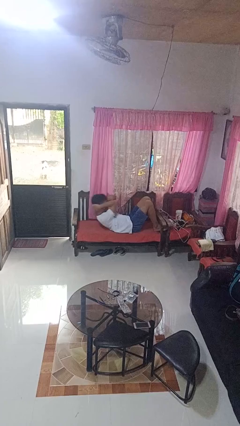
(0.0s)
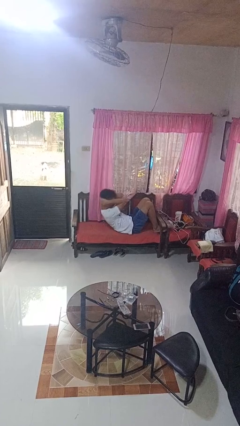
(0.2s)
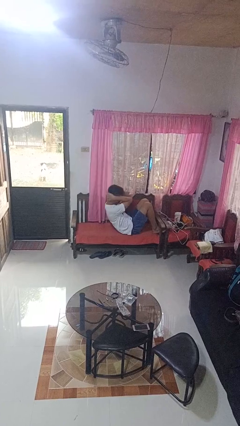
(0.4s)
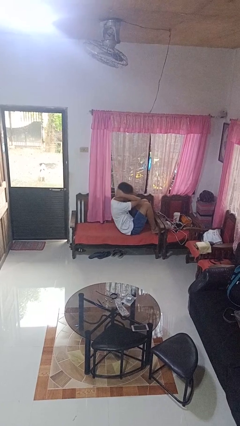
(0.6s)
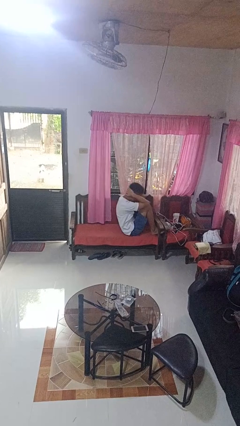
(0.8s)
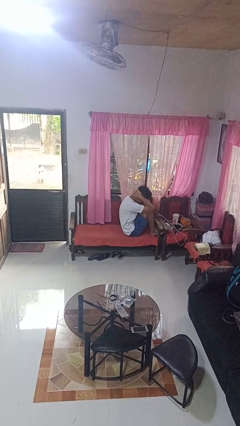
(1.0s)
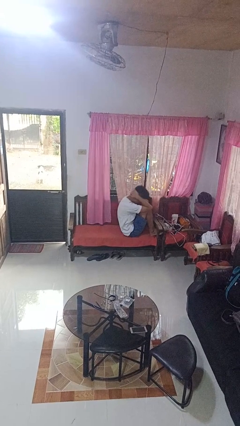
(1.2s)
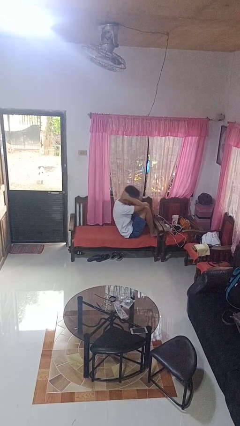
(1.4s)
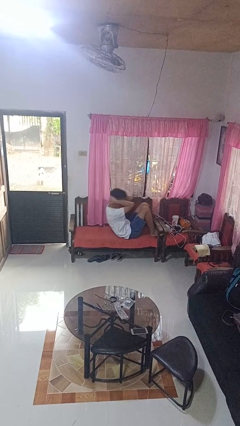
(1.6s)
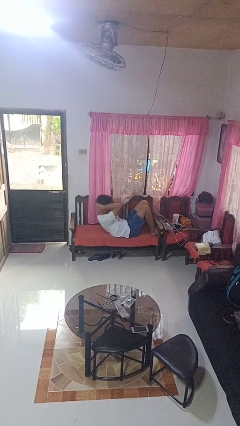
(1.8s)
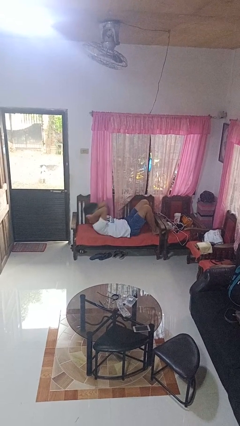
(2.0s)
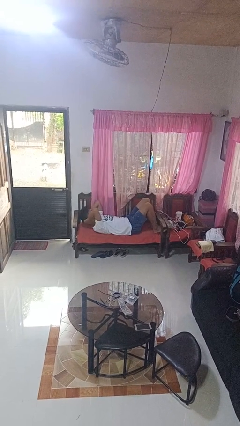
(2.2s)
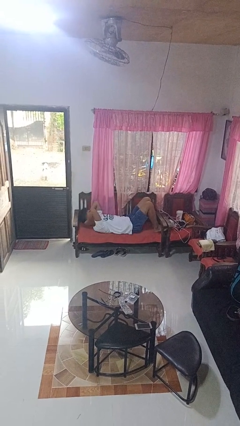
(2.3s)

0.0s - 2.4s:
person exercises with situp

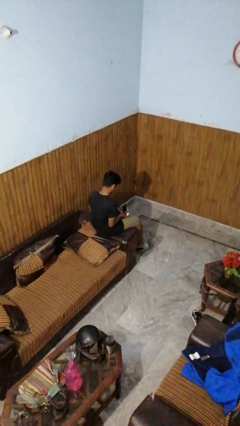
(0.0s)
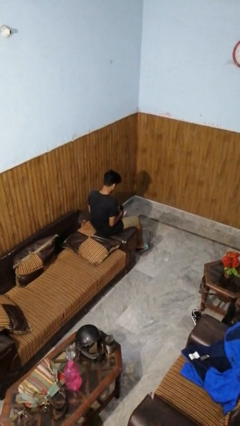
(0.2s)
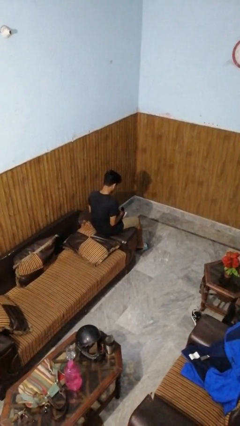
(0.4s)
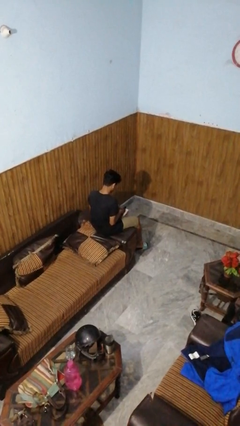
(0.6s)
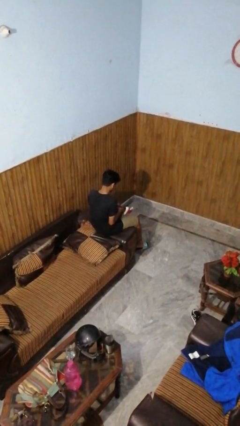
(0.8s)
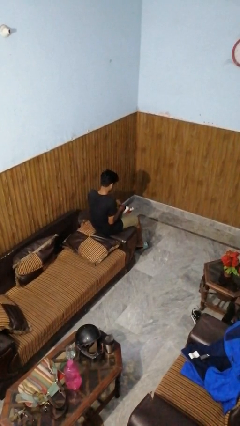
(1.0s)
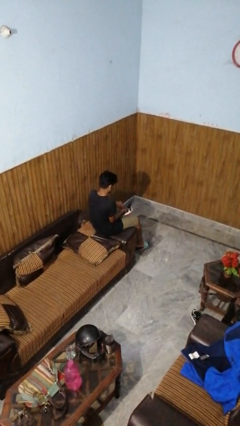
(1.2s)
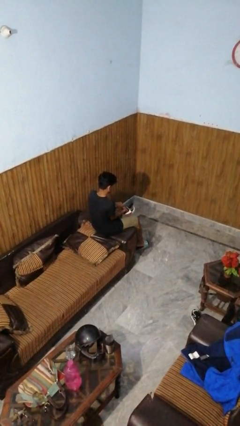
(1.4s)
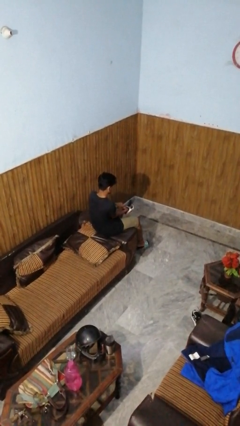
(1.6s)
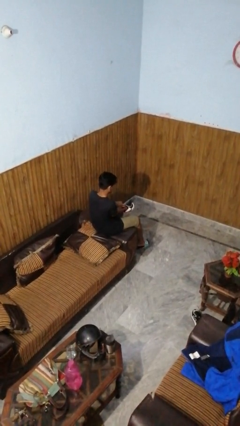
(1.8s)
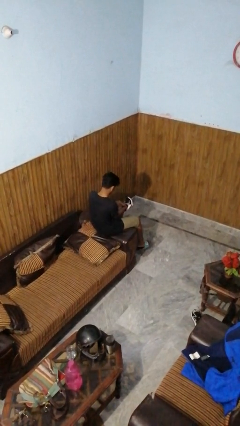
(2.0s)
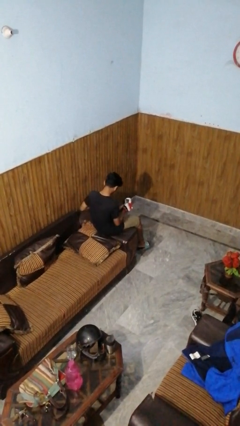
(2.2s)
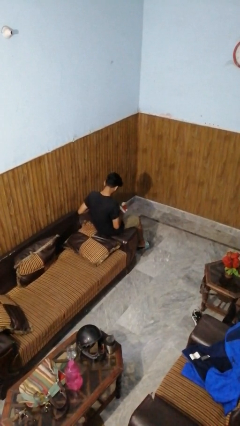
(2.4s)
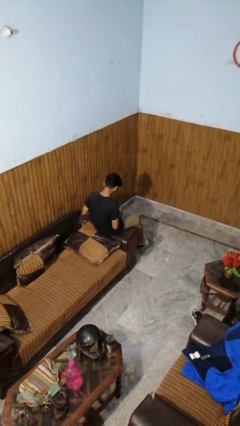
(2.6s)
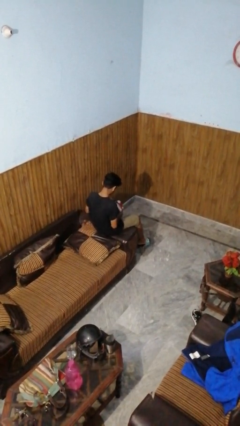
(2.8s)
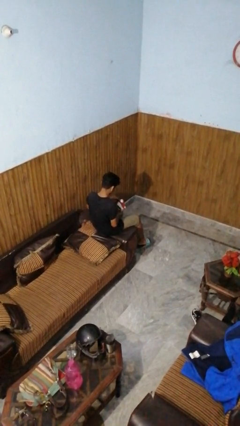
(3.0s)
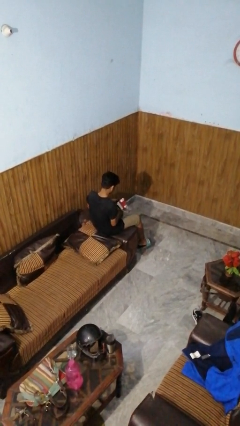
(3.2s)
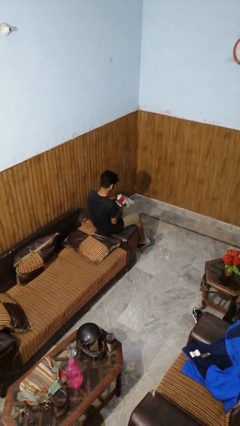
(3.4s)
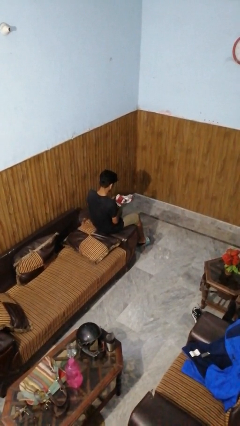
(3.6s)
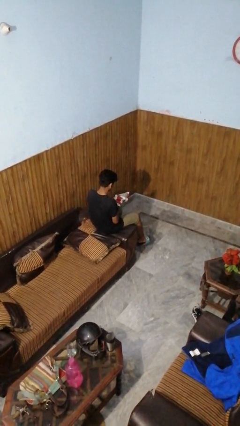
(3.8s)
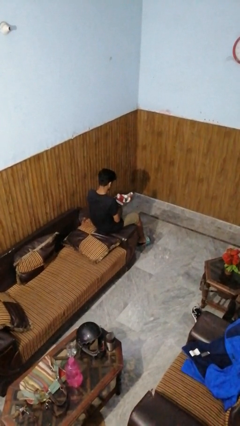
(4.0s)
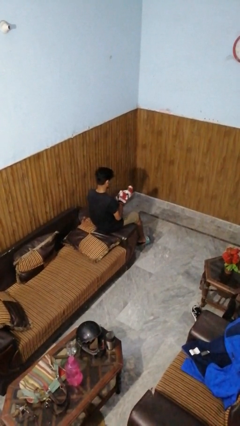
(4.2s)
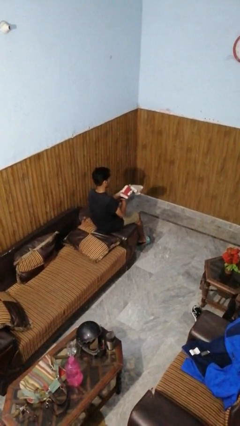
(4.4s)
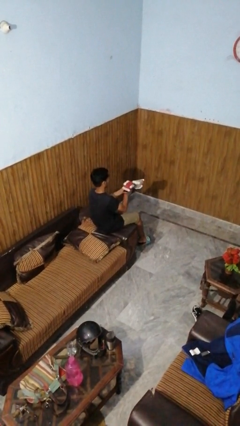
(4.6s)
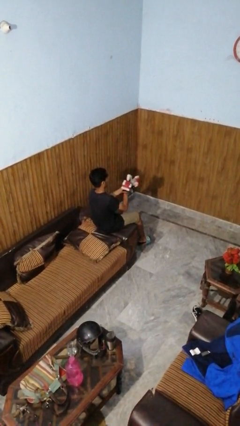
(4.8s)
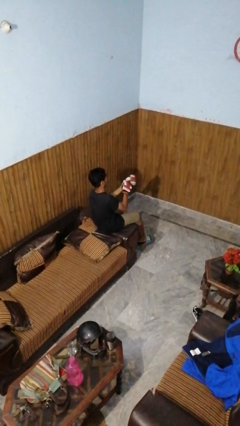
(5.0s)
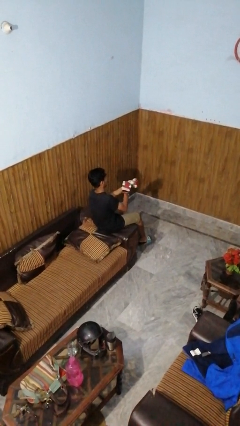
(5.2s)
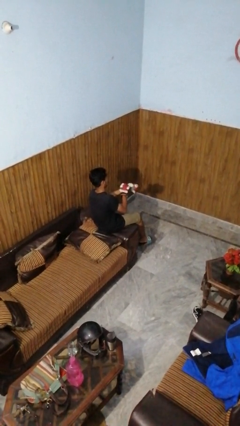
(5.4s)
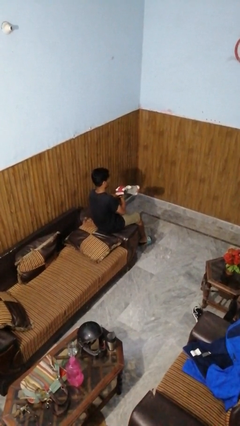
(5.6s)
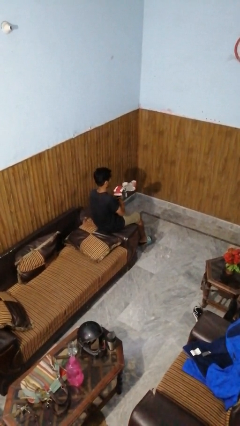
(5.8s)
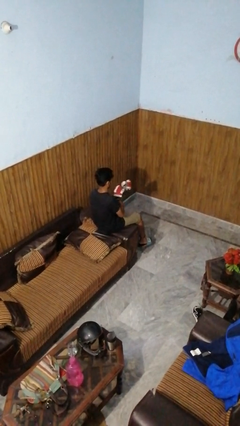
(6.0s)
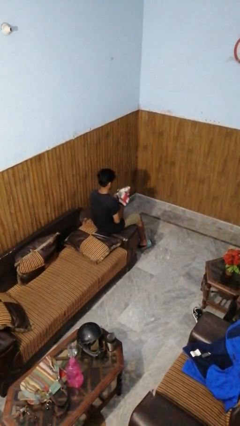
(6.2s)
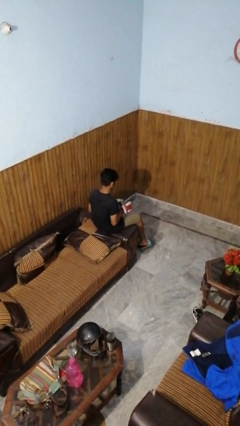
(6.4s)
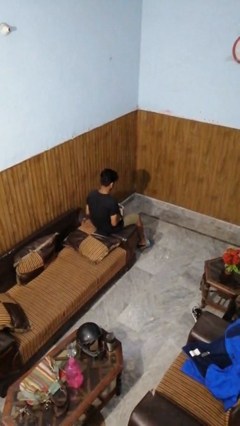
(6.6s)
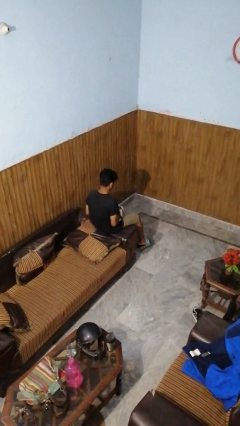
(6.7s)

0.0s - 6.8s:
person puts on gloves

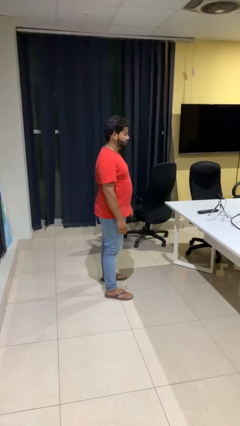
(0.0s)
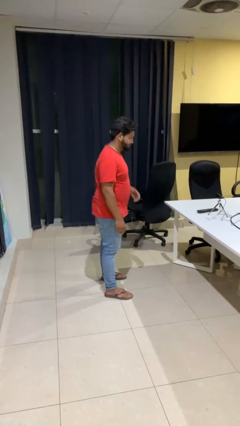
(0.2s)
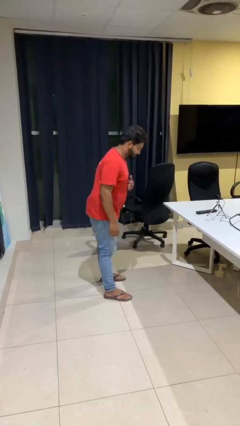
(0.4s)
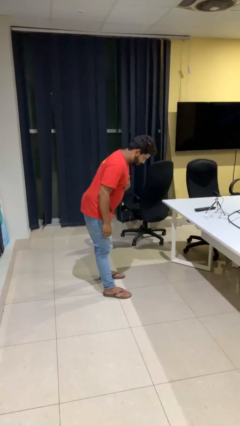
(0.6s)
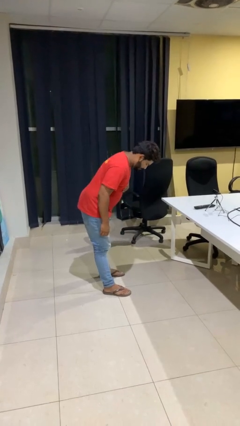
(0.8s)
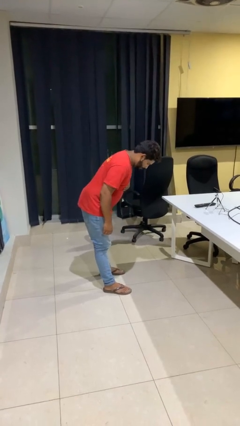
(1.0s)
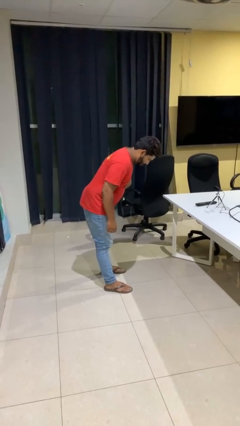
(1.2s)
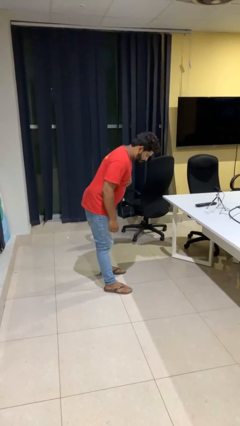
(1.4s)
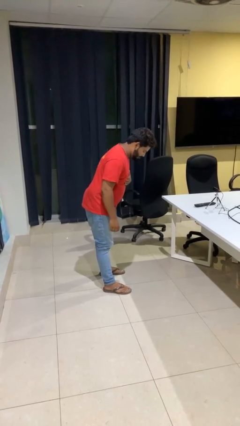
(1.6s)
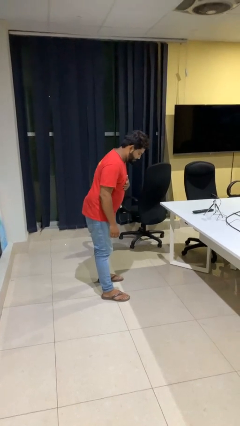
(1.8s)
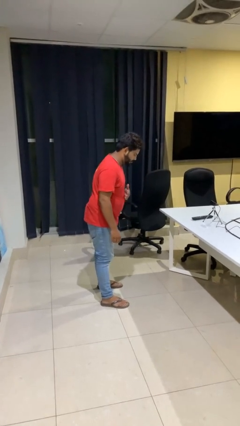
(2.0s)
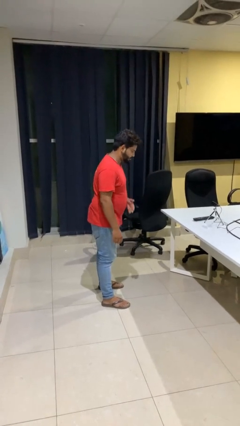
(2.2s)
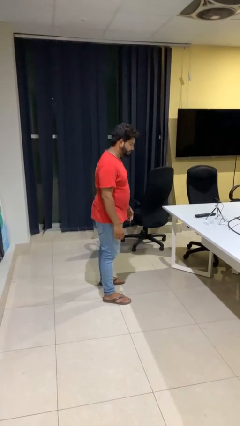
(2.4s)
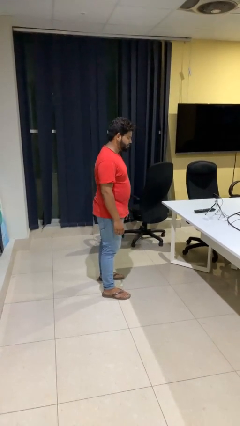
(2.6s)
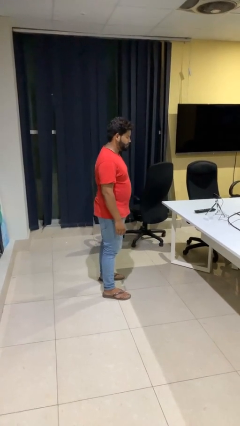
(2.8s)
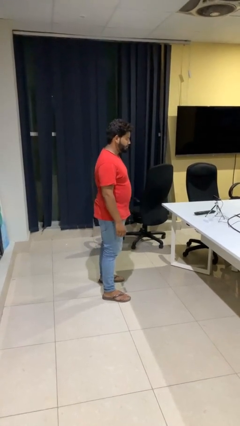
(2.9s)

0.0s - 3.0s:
person bows

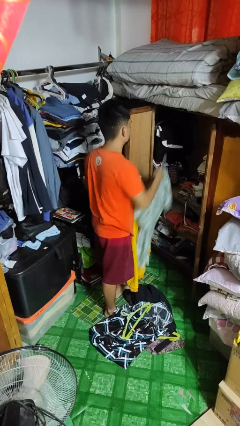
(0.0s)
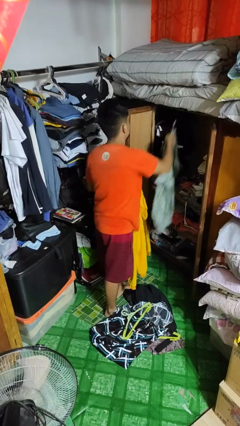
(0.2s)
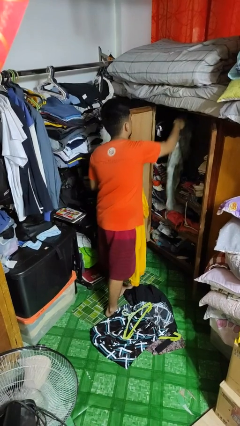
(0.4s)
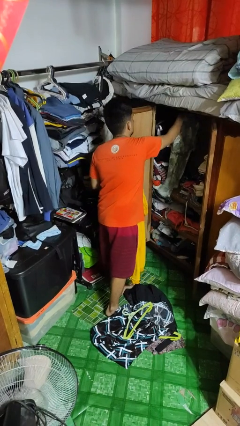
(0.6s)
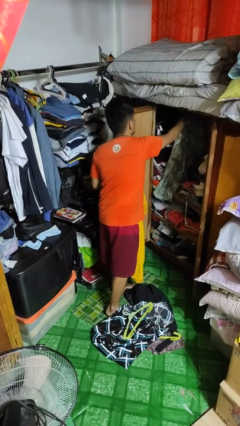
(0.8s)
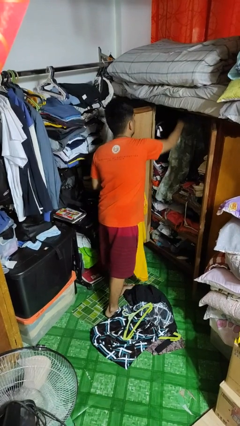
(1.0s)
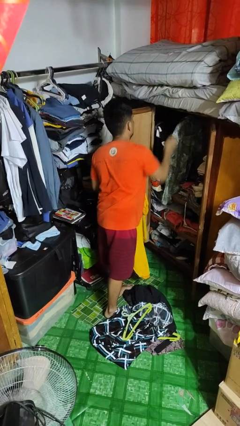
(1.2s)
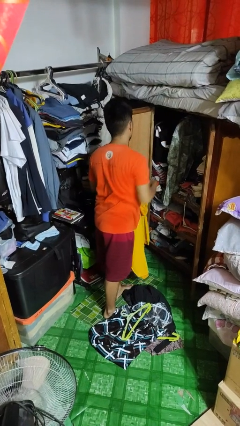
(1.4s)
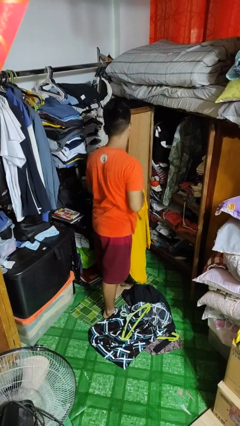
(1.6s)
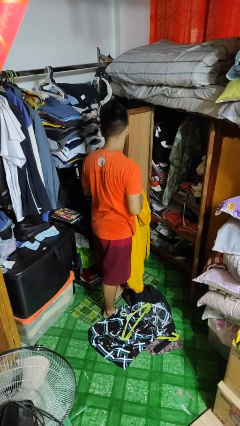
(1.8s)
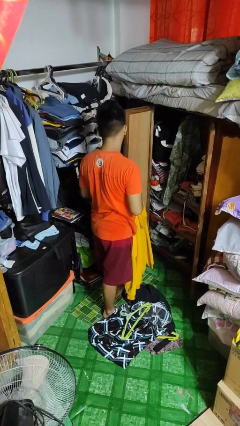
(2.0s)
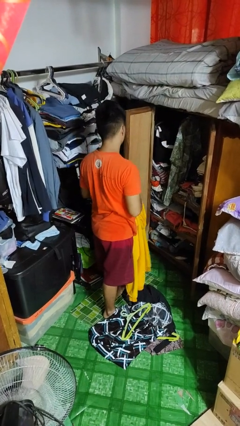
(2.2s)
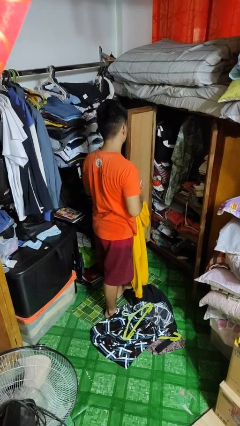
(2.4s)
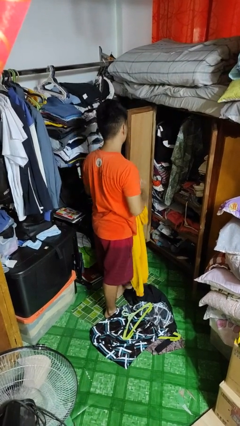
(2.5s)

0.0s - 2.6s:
person puts clothes into closet

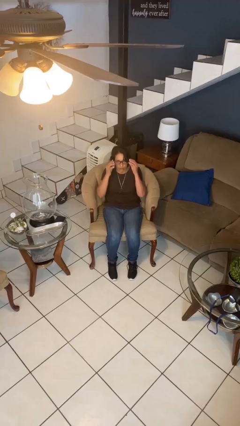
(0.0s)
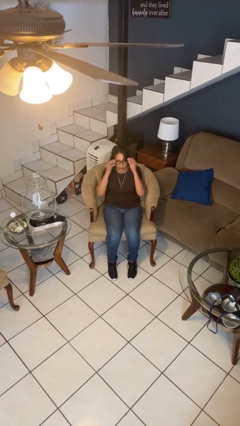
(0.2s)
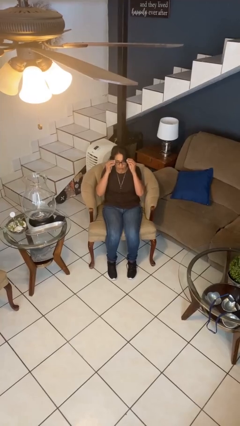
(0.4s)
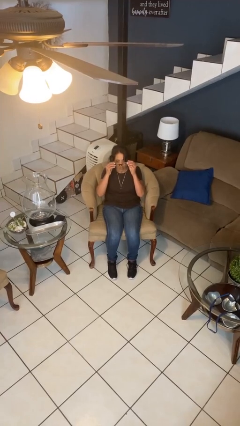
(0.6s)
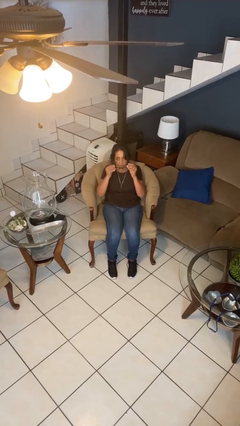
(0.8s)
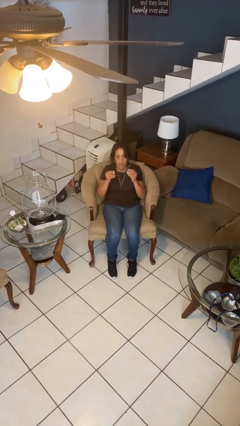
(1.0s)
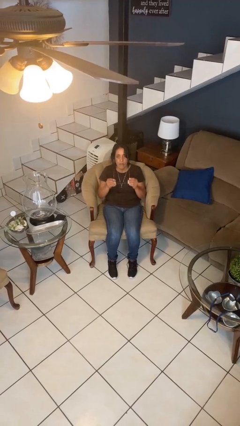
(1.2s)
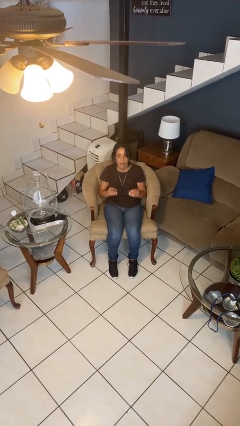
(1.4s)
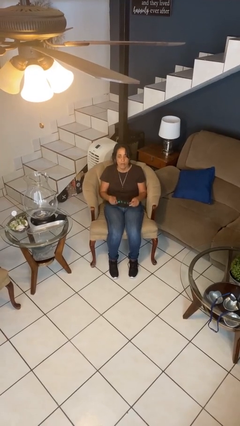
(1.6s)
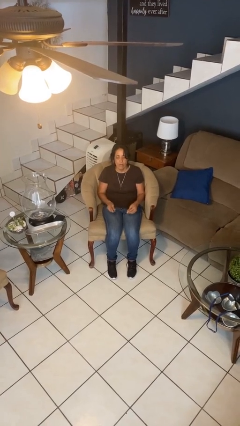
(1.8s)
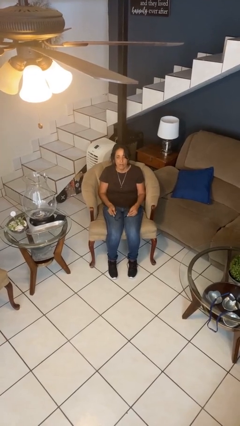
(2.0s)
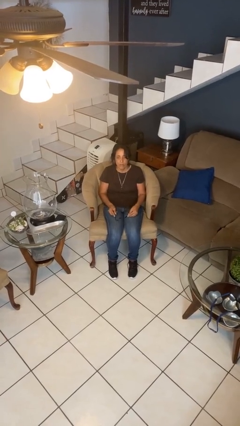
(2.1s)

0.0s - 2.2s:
person takes off glasses

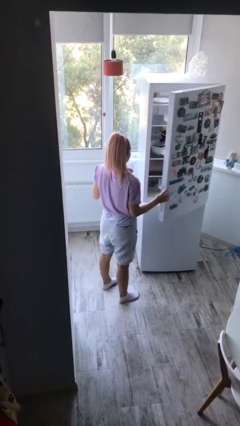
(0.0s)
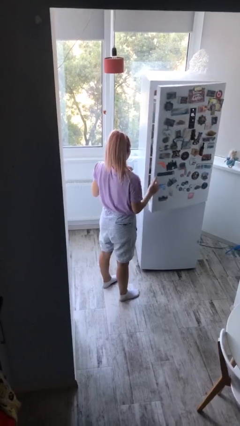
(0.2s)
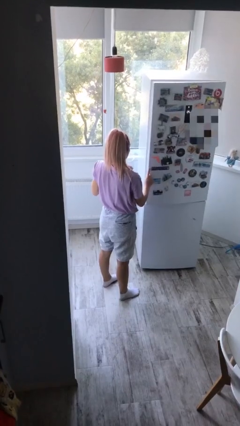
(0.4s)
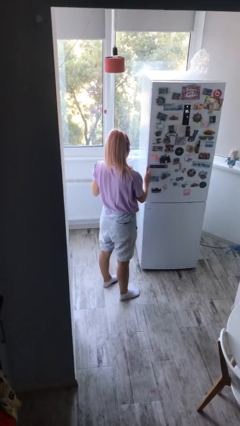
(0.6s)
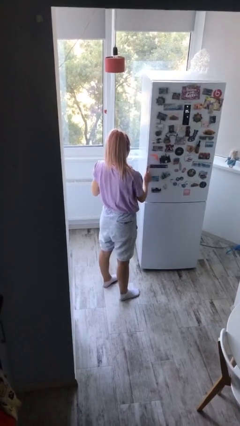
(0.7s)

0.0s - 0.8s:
person closes refrigerator
